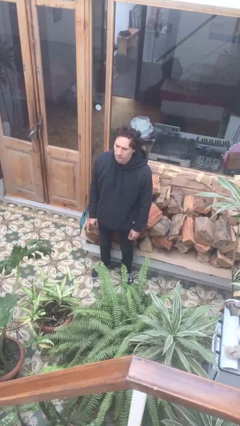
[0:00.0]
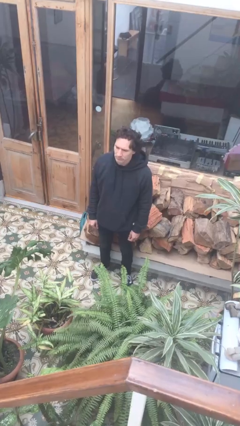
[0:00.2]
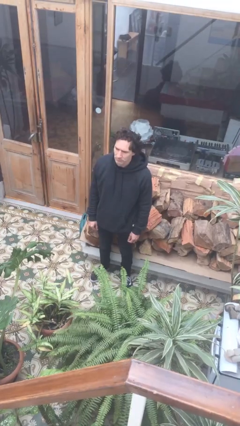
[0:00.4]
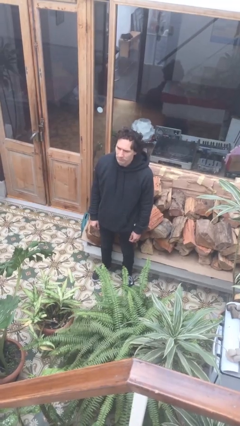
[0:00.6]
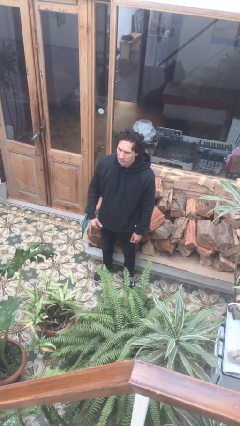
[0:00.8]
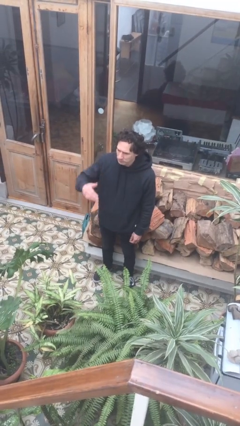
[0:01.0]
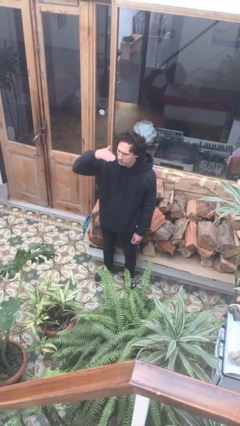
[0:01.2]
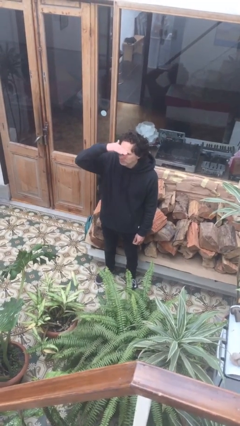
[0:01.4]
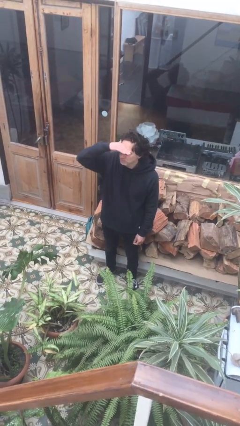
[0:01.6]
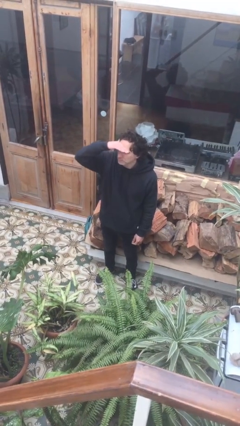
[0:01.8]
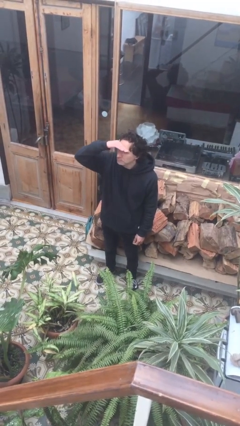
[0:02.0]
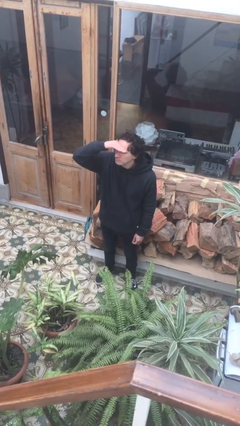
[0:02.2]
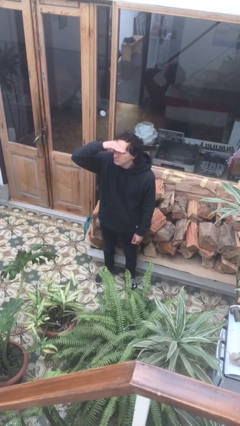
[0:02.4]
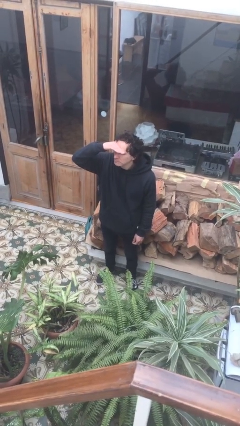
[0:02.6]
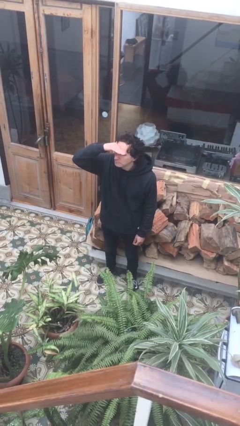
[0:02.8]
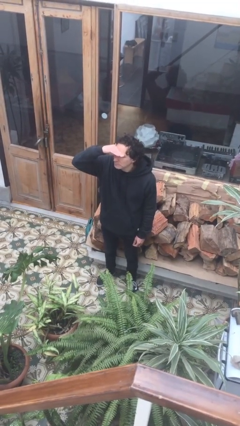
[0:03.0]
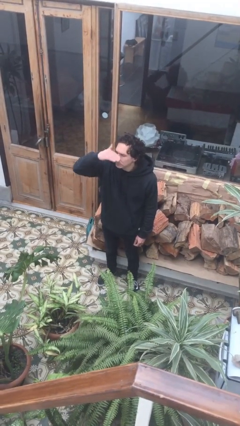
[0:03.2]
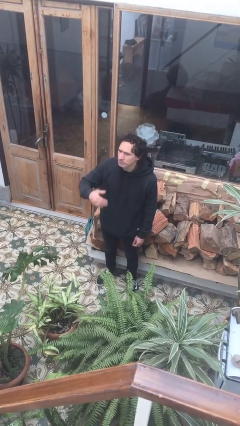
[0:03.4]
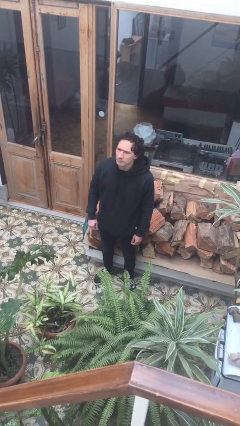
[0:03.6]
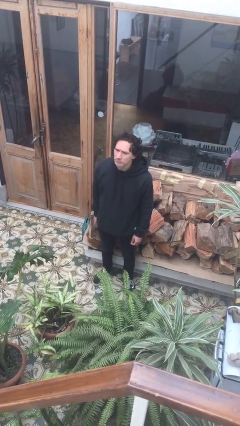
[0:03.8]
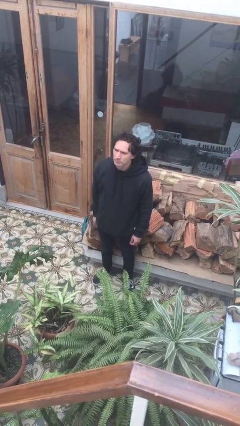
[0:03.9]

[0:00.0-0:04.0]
person shades eyes

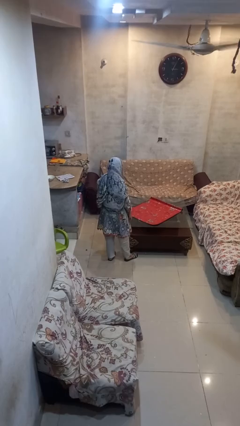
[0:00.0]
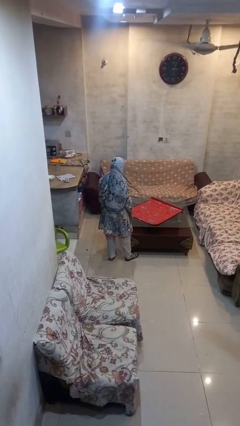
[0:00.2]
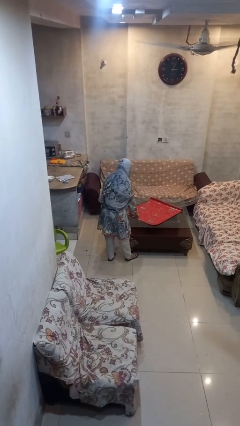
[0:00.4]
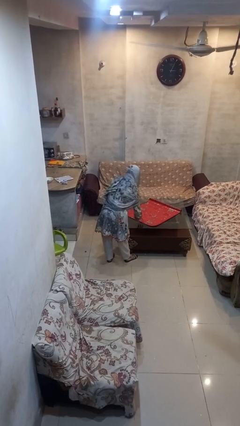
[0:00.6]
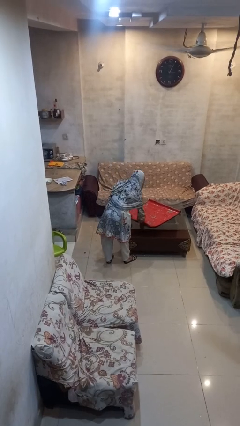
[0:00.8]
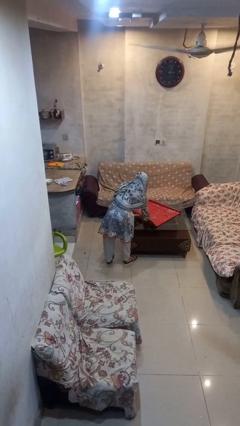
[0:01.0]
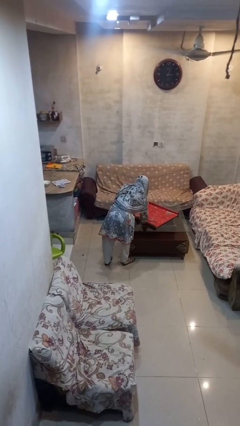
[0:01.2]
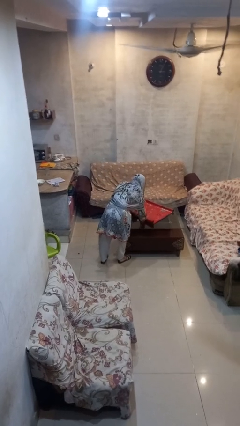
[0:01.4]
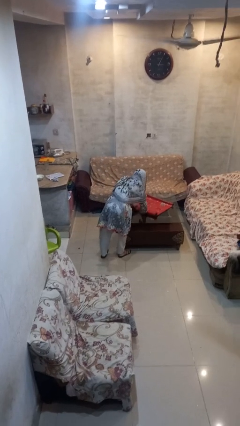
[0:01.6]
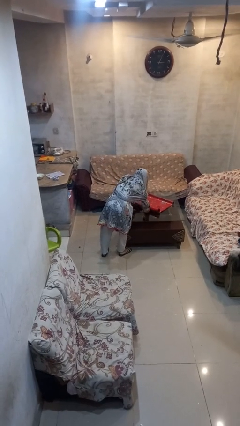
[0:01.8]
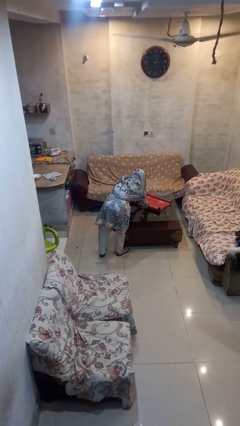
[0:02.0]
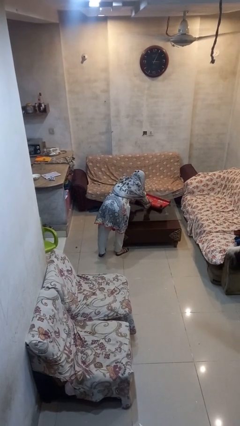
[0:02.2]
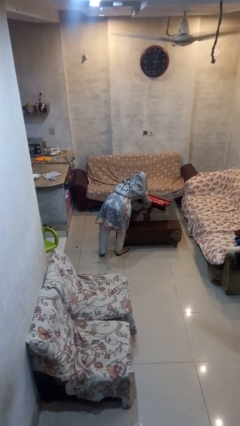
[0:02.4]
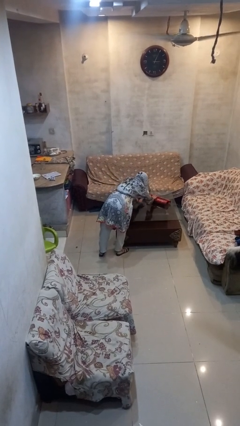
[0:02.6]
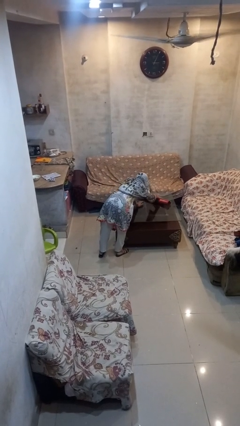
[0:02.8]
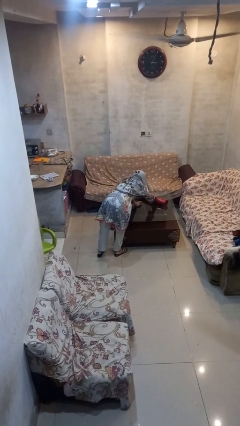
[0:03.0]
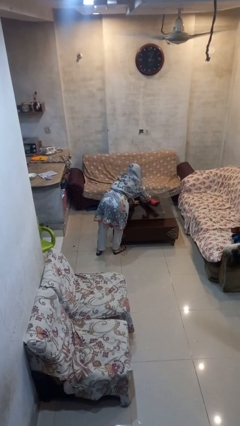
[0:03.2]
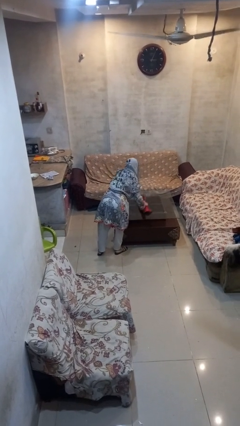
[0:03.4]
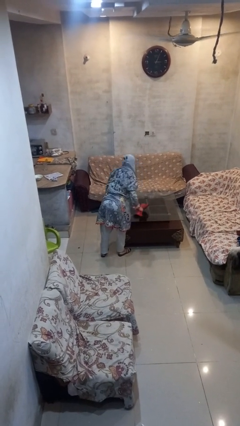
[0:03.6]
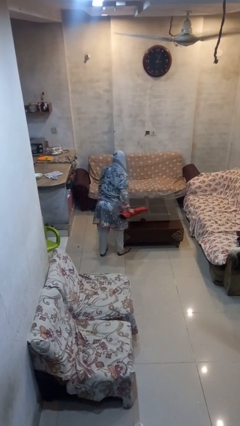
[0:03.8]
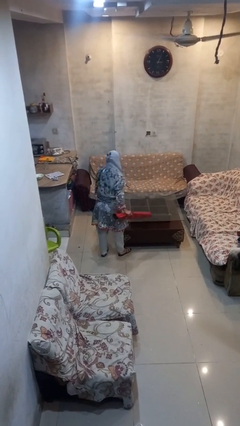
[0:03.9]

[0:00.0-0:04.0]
person folds tablecloth

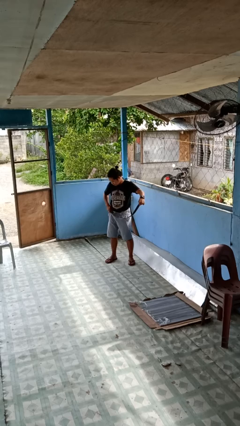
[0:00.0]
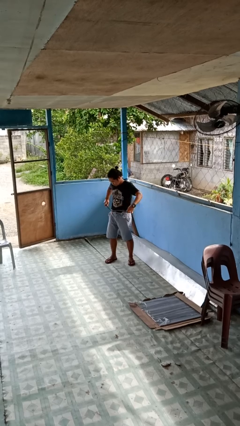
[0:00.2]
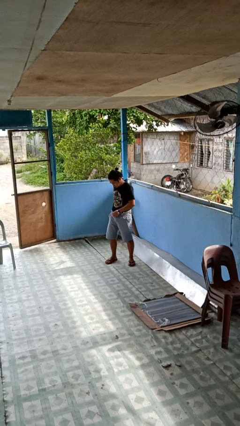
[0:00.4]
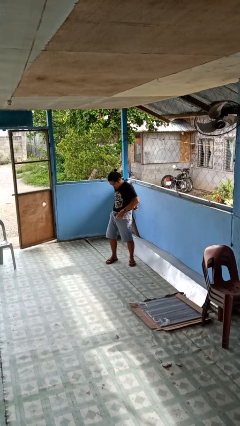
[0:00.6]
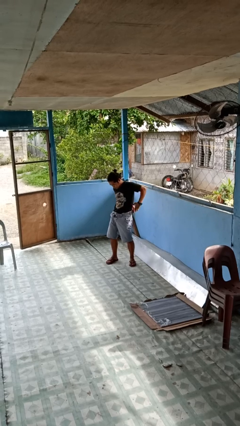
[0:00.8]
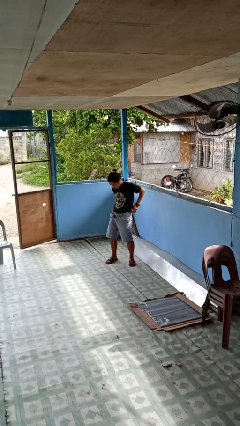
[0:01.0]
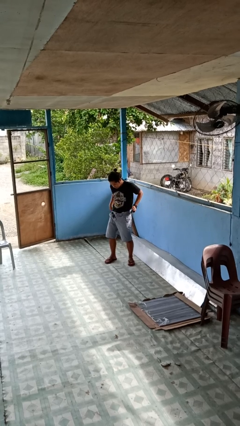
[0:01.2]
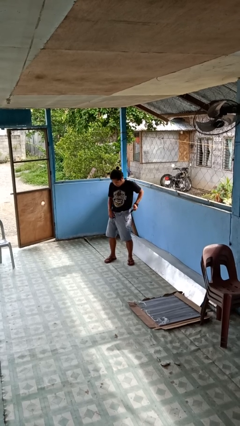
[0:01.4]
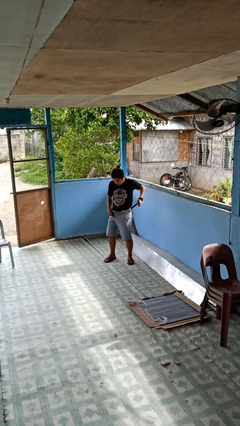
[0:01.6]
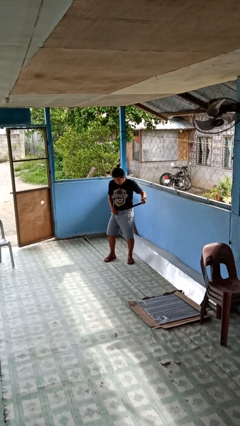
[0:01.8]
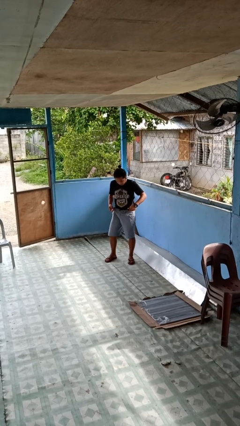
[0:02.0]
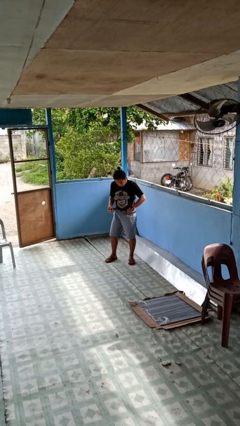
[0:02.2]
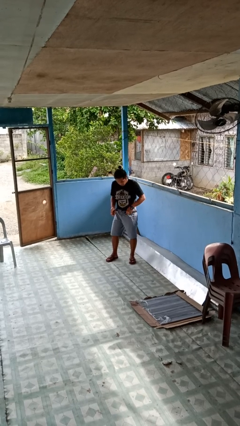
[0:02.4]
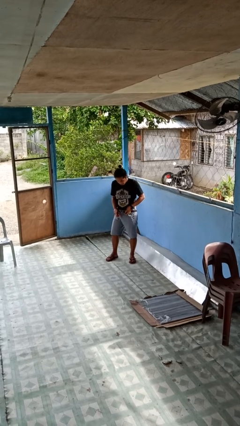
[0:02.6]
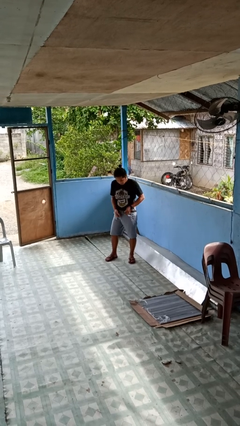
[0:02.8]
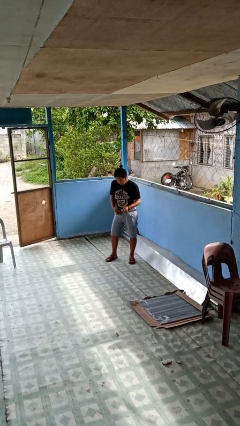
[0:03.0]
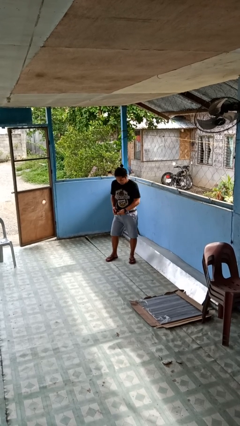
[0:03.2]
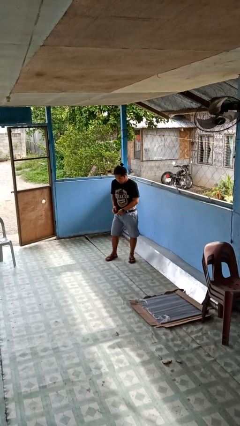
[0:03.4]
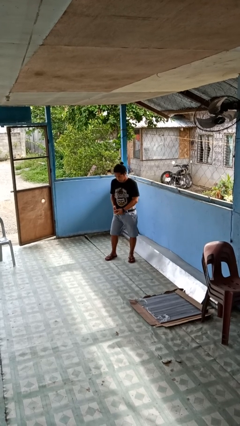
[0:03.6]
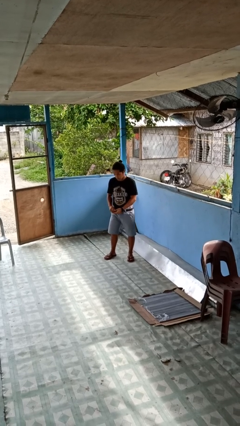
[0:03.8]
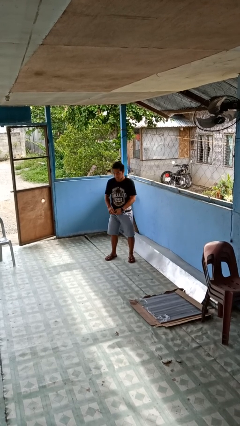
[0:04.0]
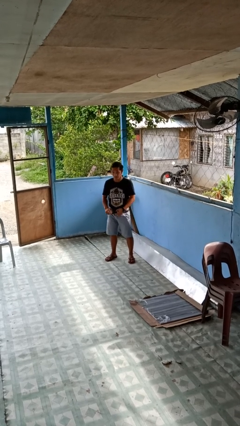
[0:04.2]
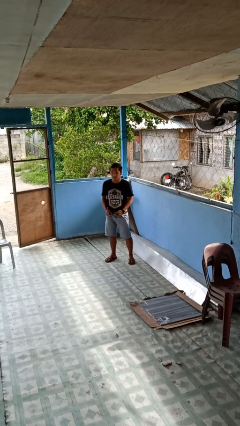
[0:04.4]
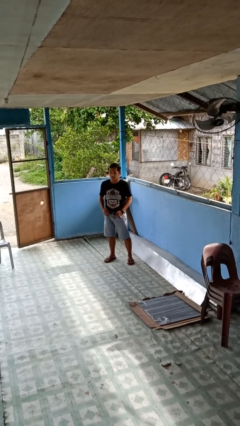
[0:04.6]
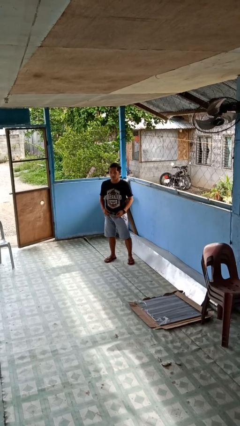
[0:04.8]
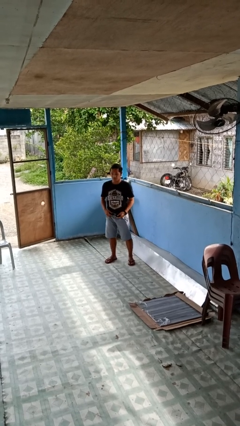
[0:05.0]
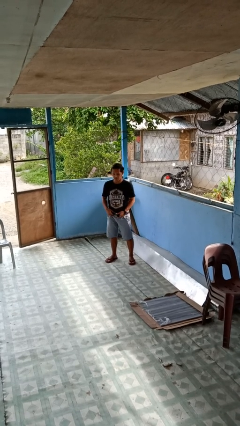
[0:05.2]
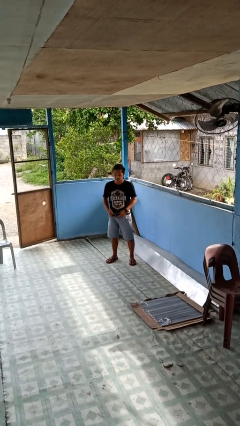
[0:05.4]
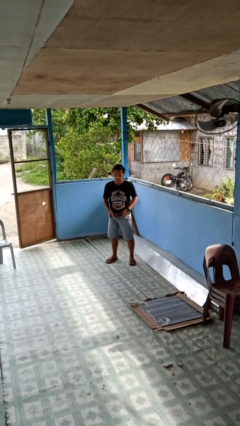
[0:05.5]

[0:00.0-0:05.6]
person puts on belt

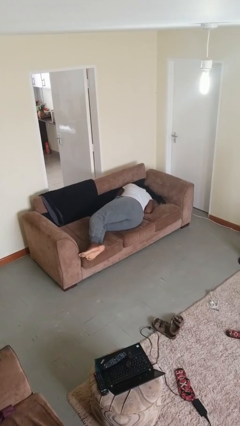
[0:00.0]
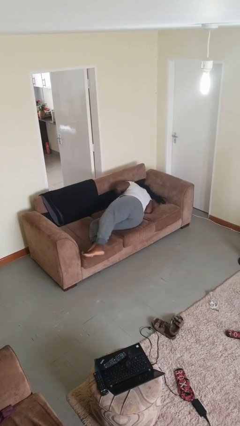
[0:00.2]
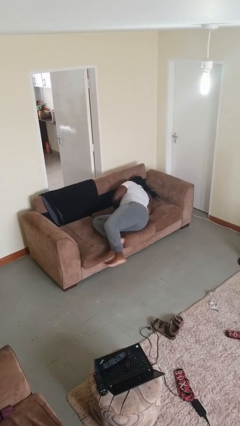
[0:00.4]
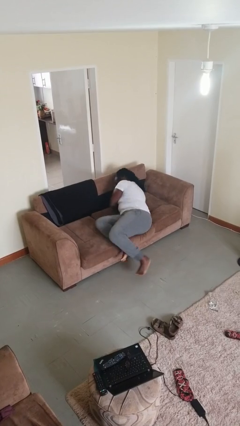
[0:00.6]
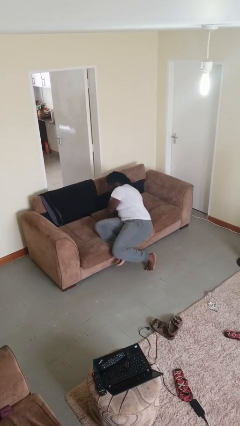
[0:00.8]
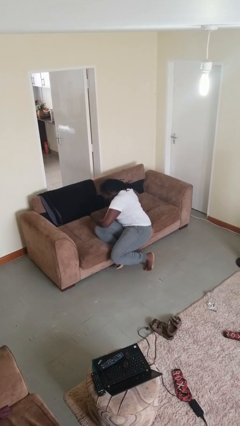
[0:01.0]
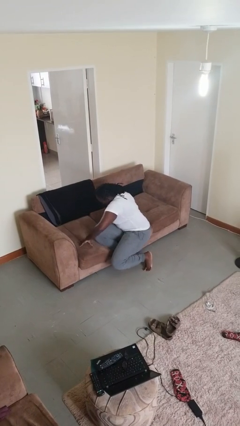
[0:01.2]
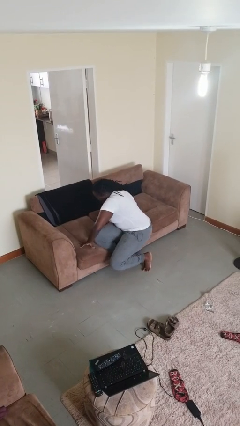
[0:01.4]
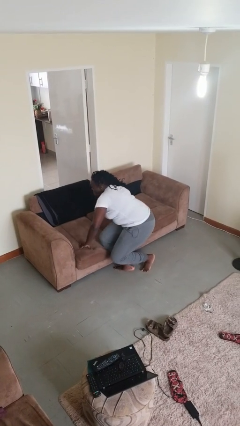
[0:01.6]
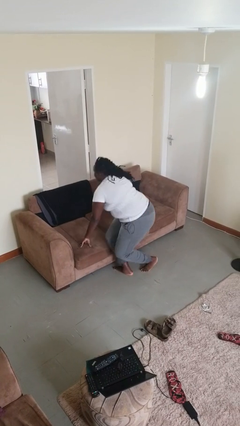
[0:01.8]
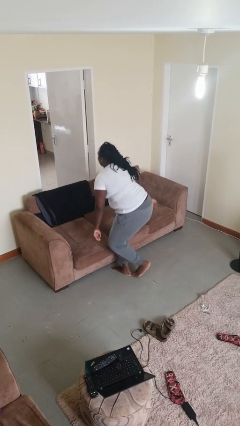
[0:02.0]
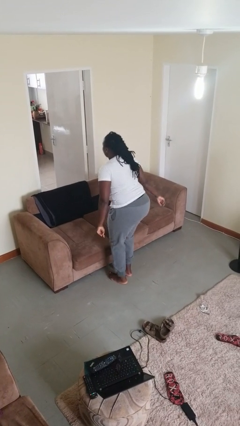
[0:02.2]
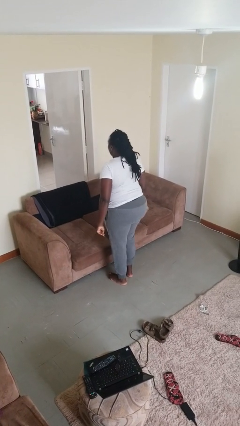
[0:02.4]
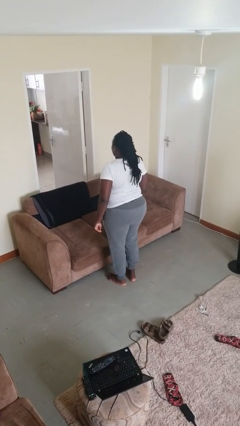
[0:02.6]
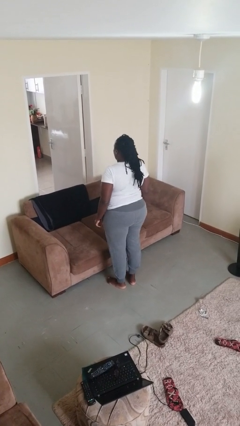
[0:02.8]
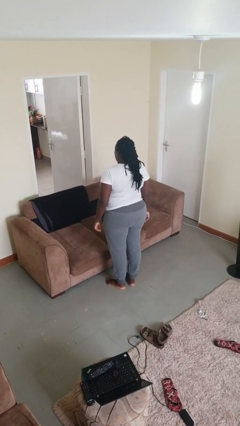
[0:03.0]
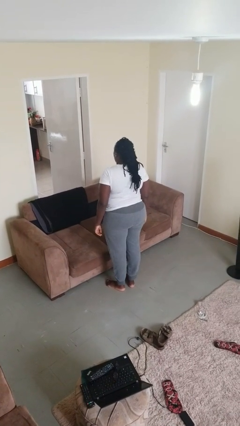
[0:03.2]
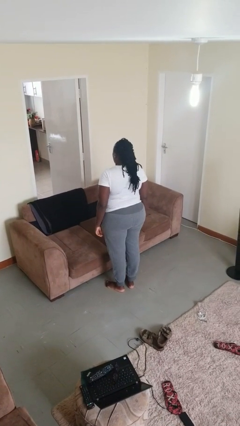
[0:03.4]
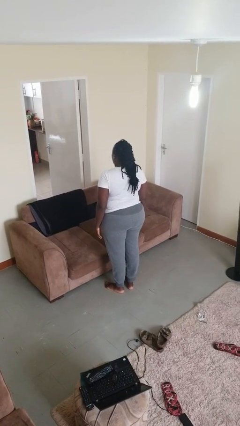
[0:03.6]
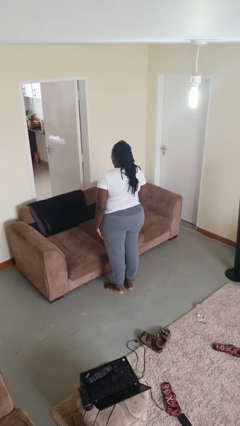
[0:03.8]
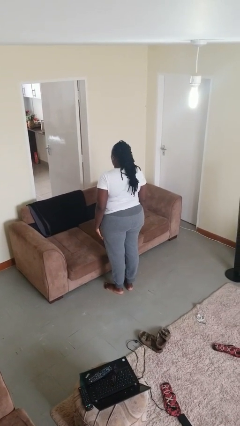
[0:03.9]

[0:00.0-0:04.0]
person stands up
